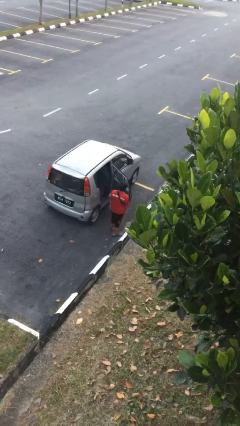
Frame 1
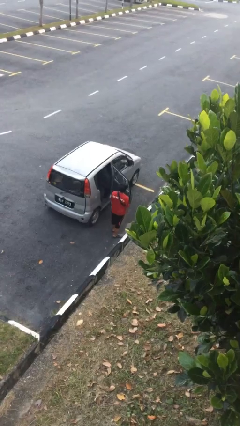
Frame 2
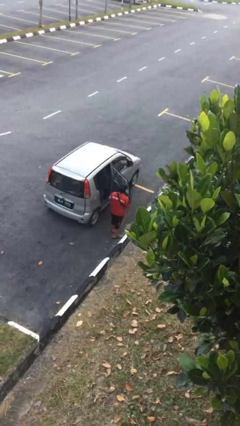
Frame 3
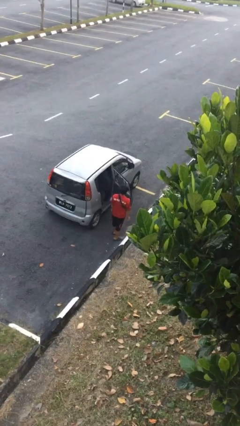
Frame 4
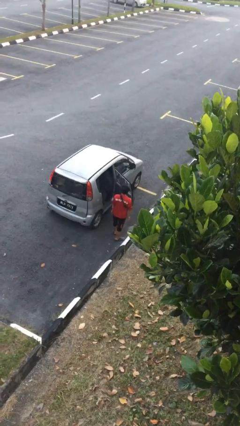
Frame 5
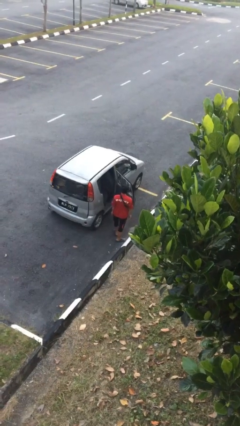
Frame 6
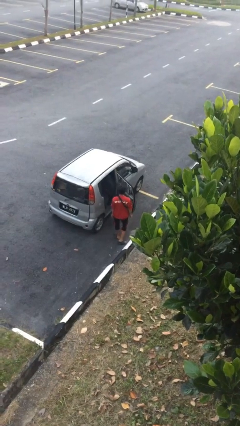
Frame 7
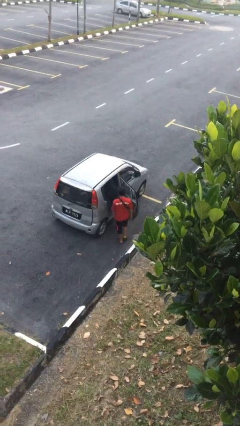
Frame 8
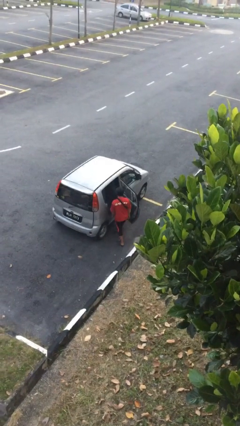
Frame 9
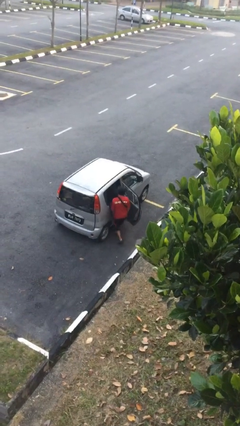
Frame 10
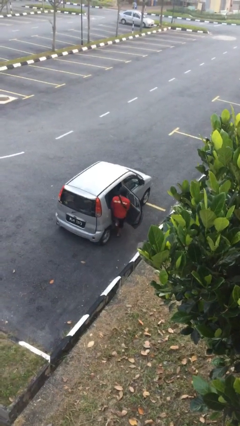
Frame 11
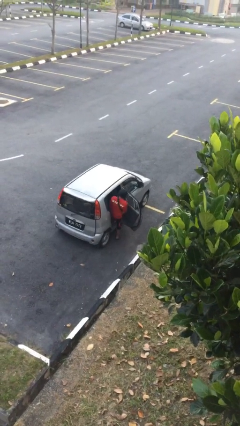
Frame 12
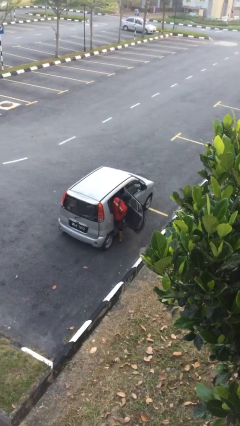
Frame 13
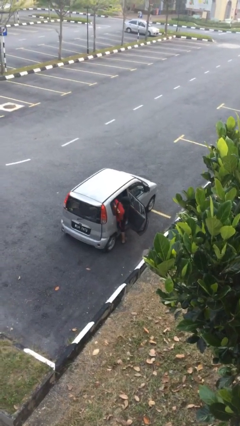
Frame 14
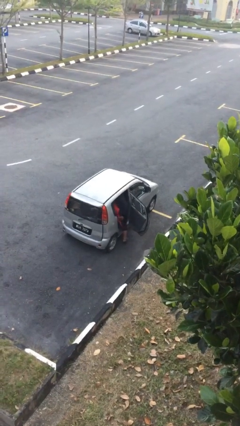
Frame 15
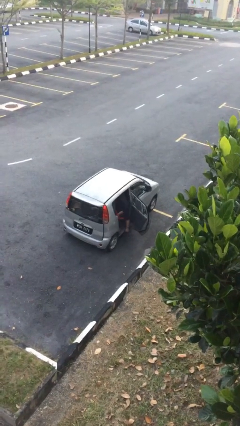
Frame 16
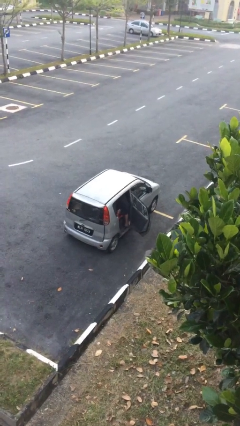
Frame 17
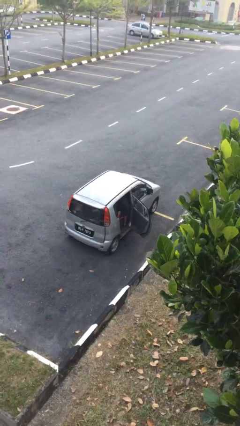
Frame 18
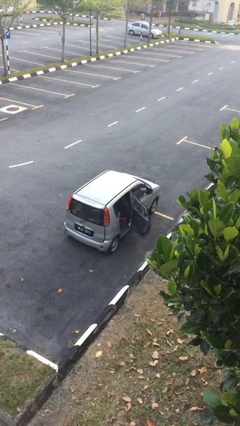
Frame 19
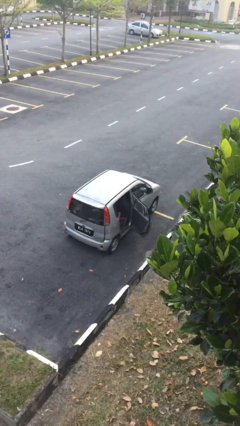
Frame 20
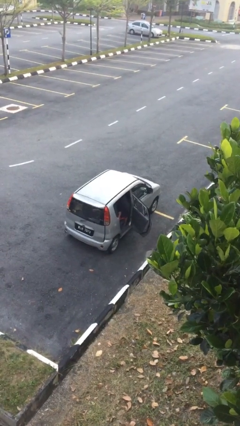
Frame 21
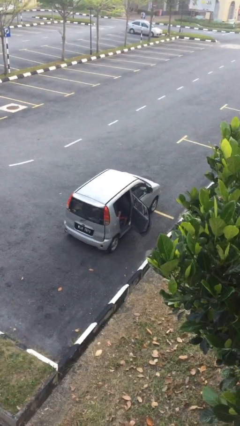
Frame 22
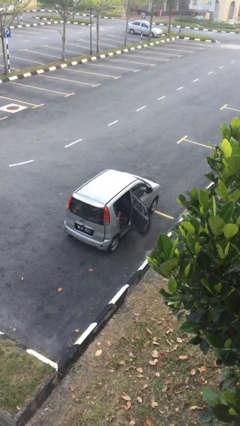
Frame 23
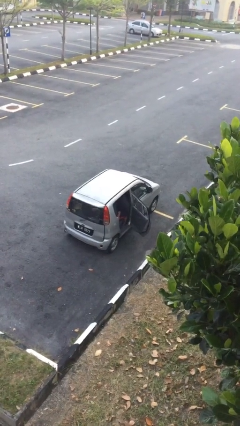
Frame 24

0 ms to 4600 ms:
person enters car

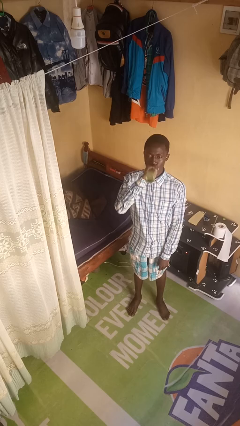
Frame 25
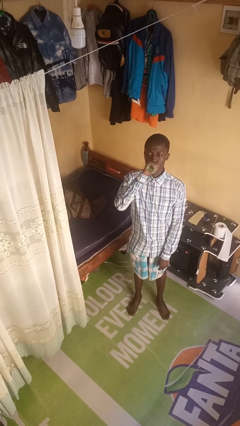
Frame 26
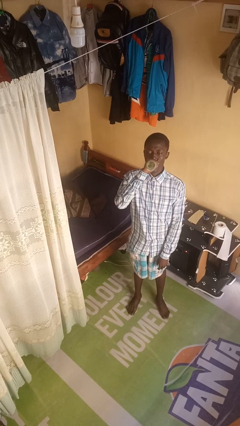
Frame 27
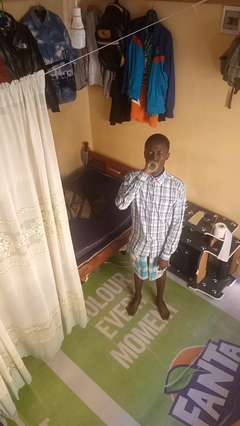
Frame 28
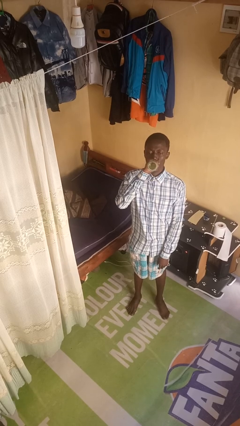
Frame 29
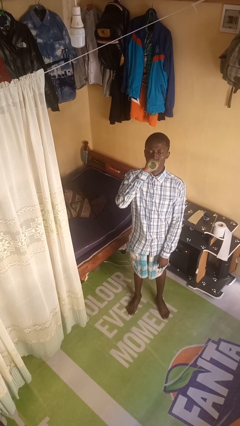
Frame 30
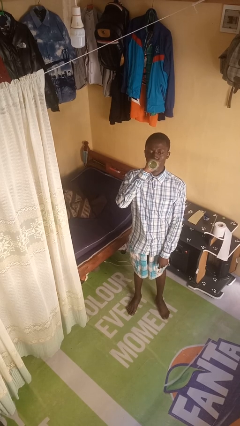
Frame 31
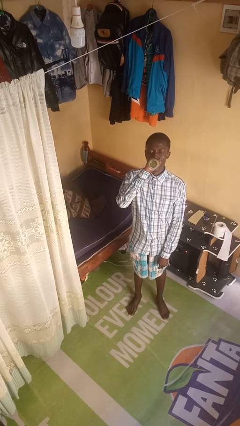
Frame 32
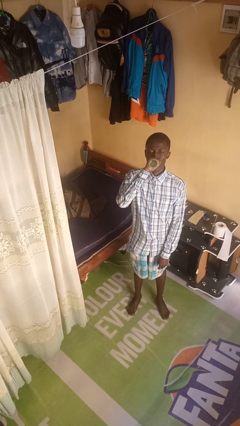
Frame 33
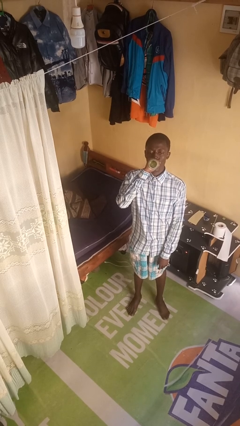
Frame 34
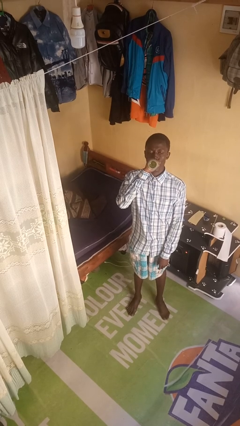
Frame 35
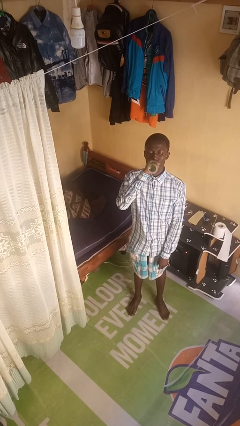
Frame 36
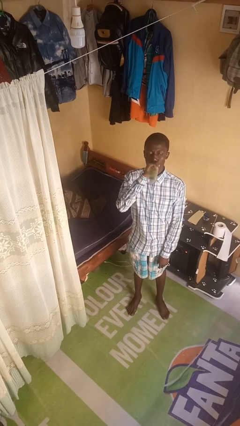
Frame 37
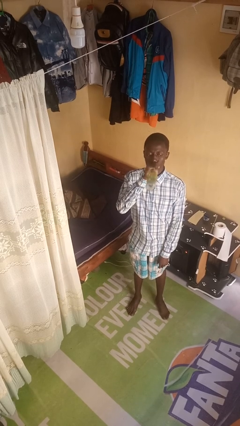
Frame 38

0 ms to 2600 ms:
person drinks from bottle

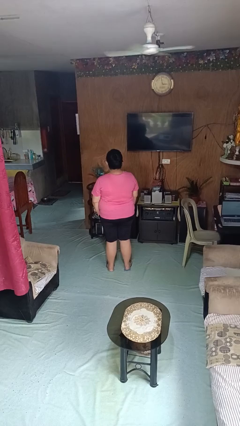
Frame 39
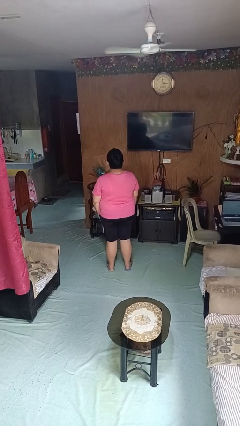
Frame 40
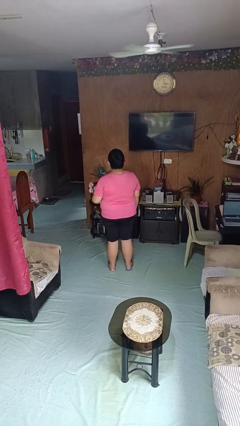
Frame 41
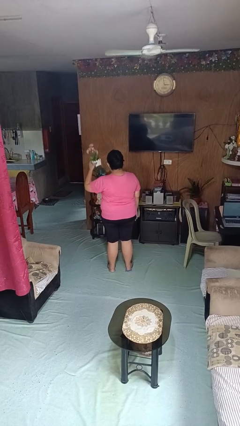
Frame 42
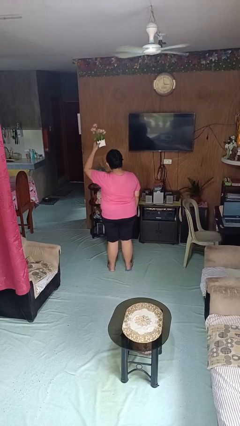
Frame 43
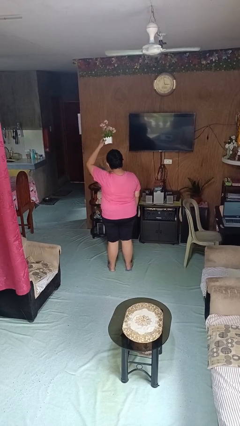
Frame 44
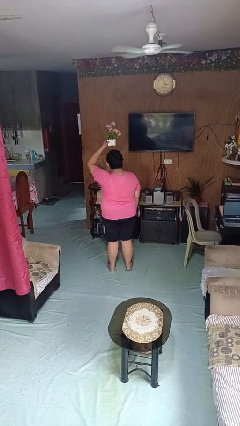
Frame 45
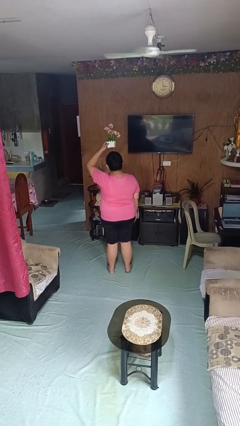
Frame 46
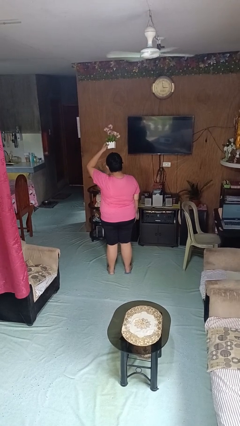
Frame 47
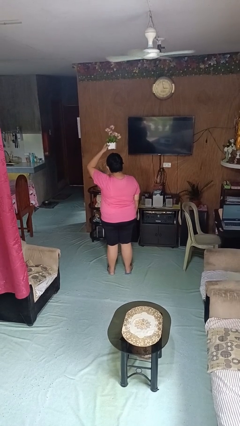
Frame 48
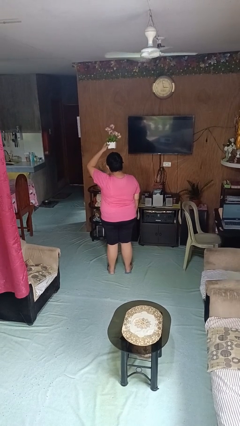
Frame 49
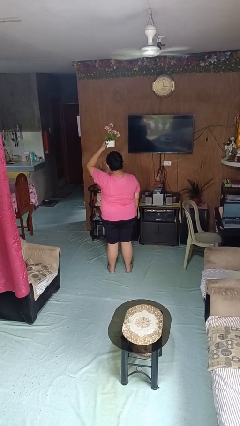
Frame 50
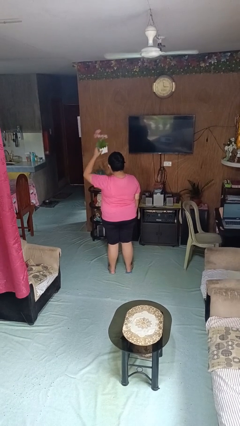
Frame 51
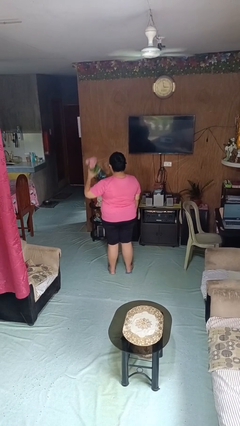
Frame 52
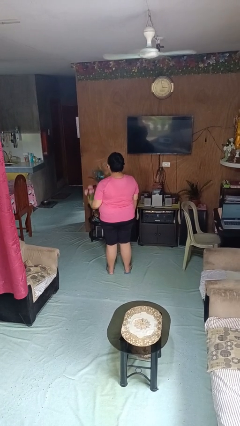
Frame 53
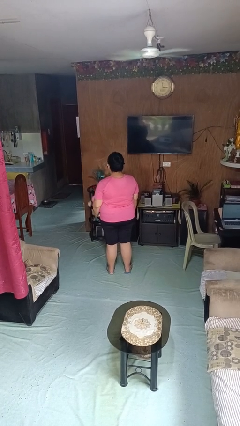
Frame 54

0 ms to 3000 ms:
person holds object above head

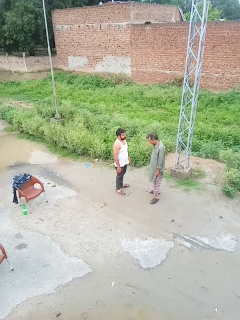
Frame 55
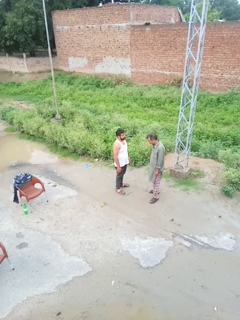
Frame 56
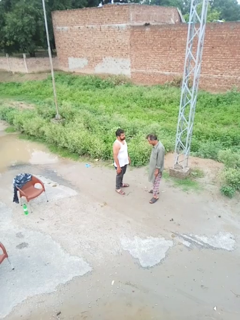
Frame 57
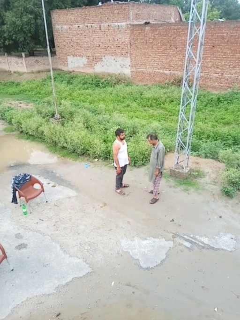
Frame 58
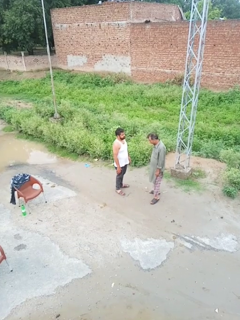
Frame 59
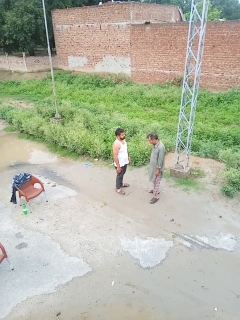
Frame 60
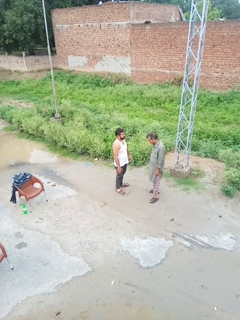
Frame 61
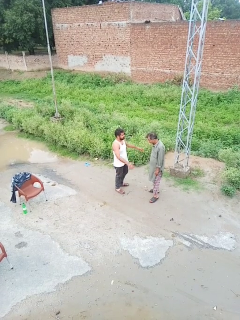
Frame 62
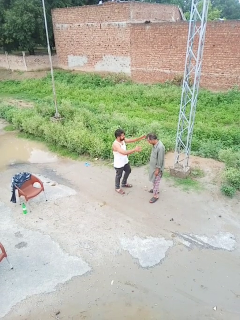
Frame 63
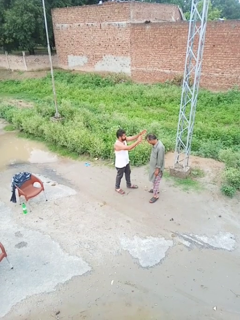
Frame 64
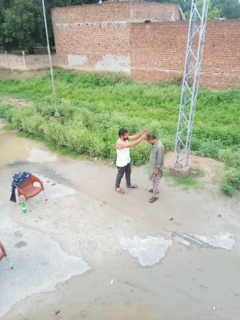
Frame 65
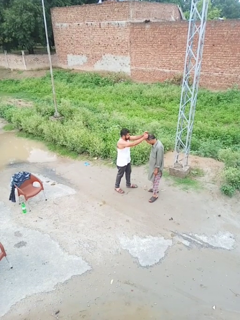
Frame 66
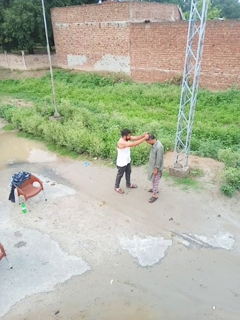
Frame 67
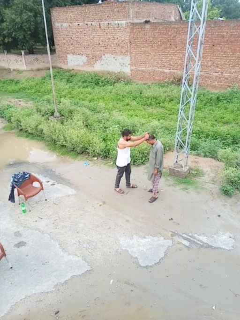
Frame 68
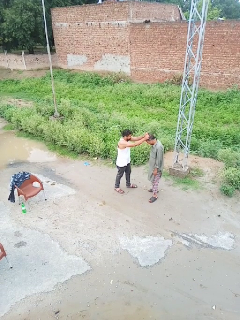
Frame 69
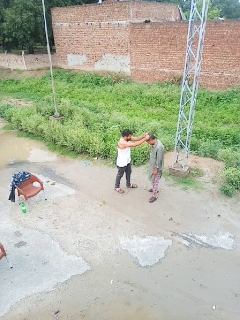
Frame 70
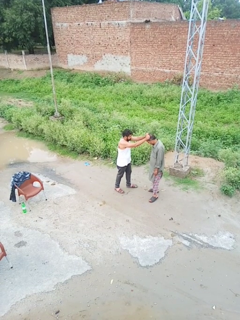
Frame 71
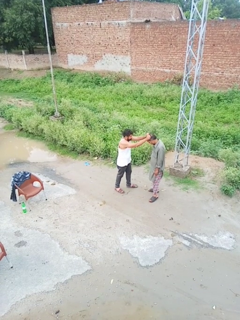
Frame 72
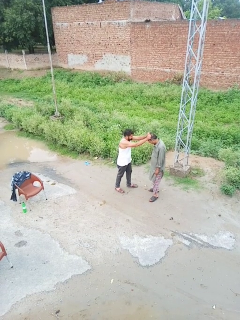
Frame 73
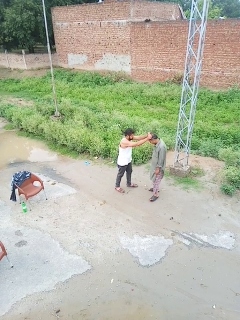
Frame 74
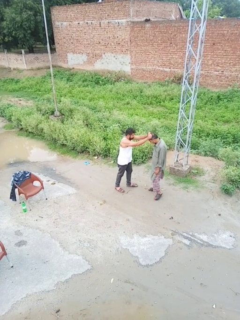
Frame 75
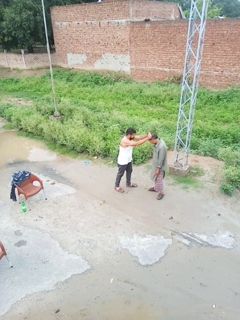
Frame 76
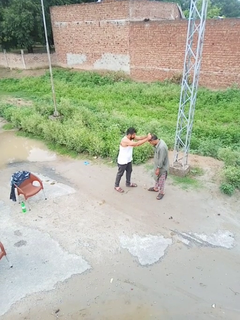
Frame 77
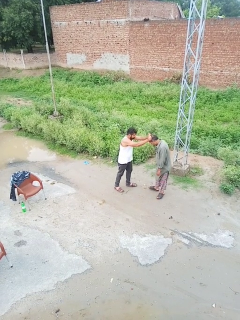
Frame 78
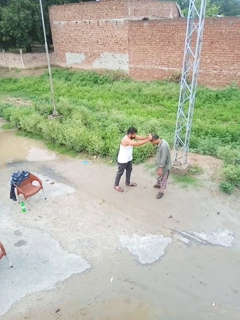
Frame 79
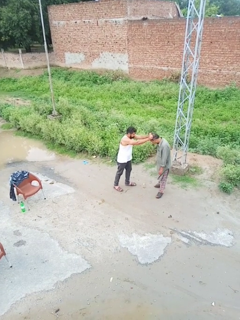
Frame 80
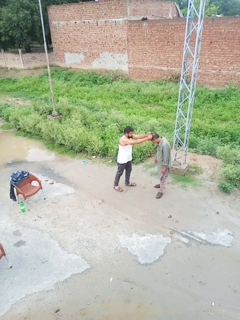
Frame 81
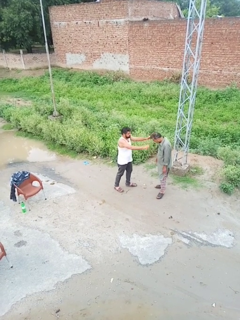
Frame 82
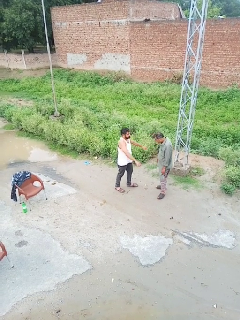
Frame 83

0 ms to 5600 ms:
person grabs person by hair

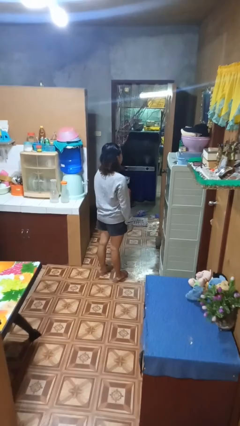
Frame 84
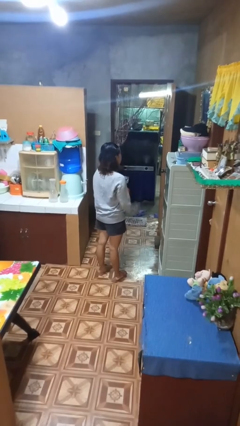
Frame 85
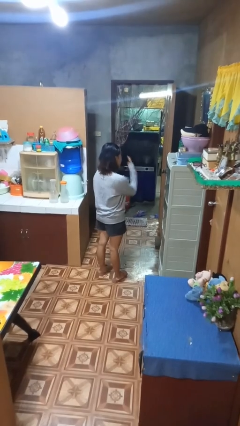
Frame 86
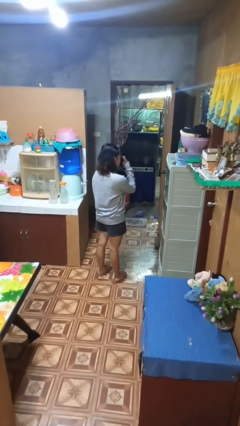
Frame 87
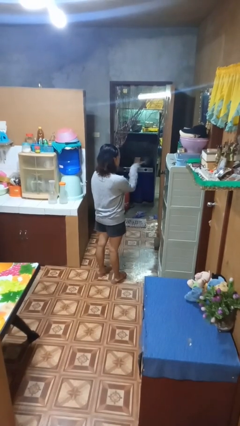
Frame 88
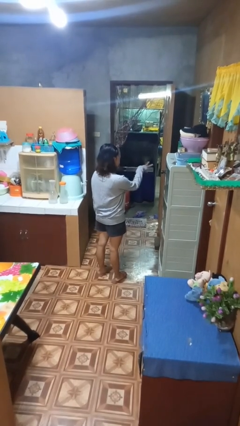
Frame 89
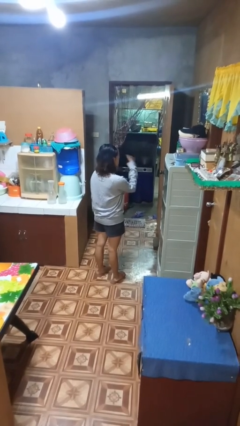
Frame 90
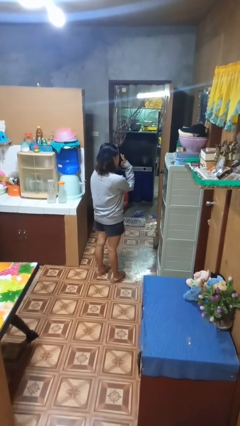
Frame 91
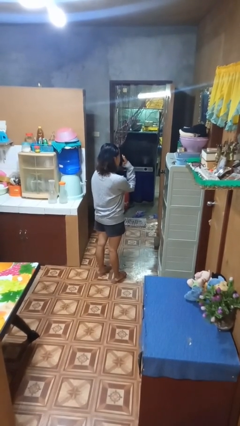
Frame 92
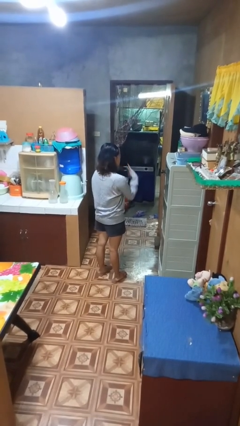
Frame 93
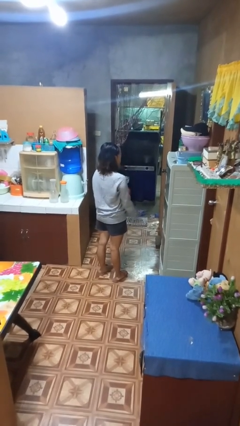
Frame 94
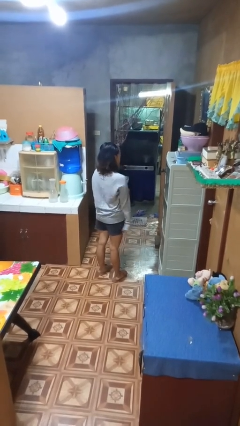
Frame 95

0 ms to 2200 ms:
person gestures watch closely

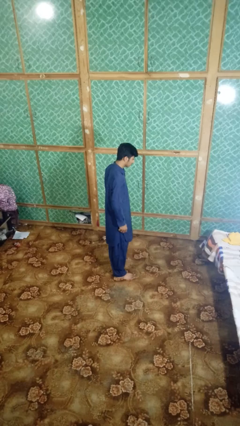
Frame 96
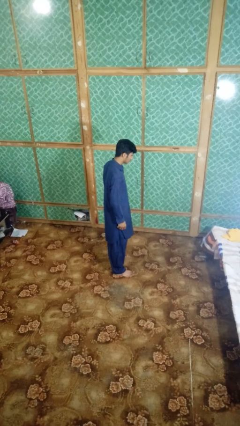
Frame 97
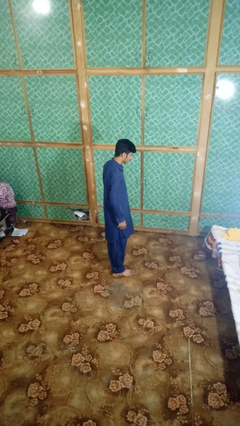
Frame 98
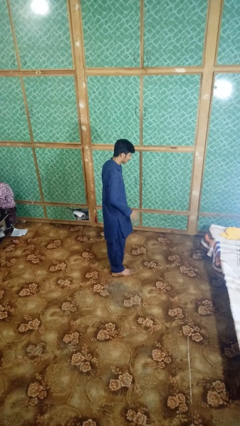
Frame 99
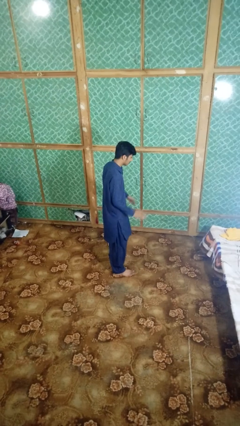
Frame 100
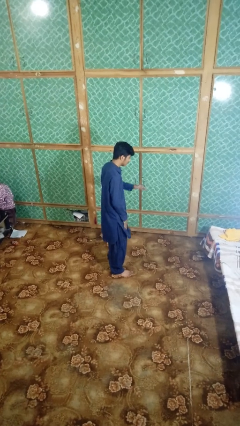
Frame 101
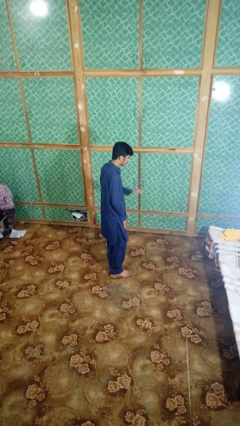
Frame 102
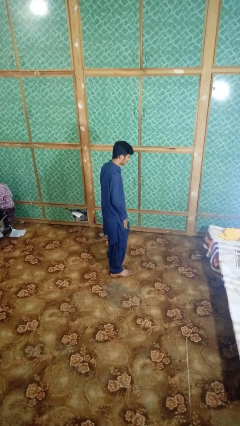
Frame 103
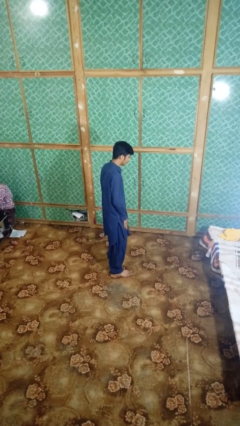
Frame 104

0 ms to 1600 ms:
person slaps hands on thighs
